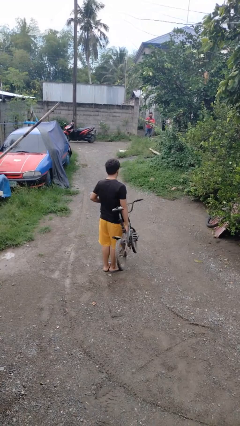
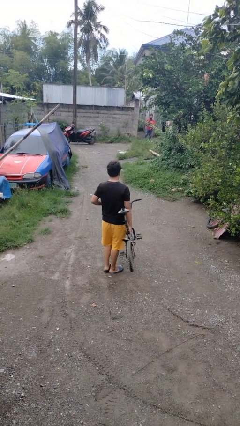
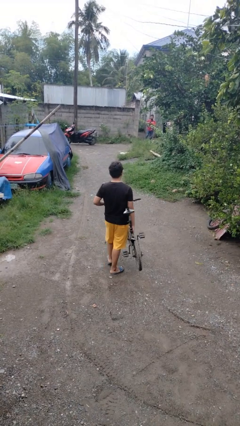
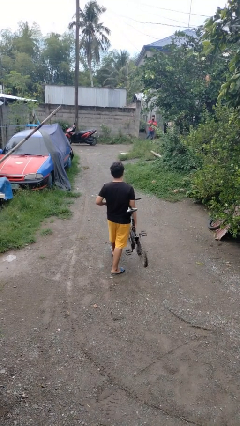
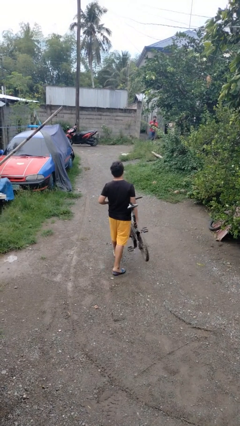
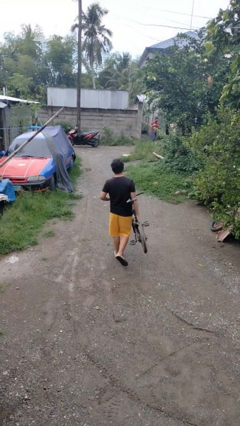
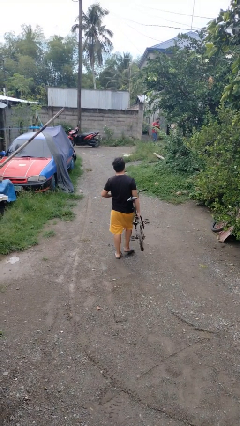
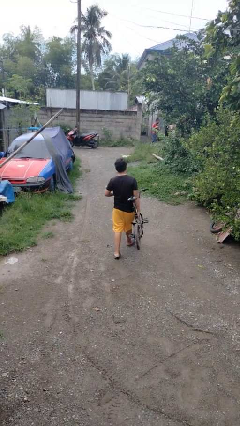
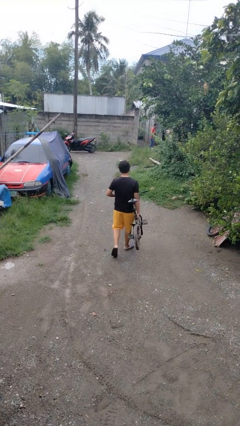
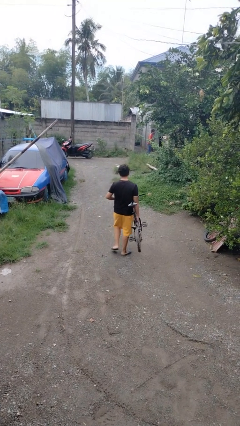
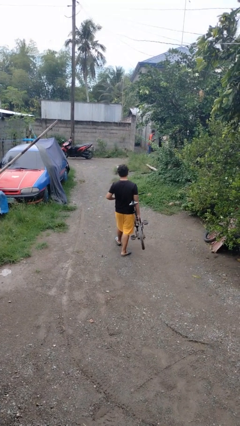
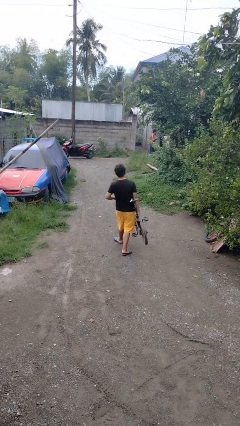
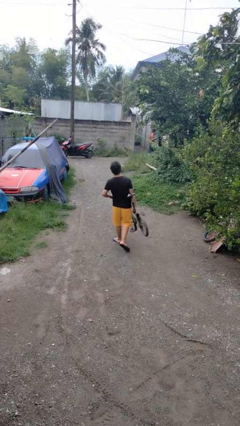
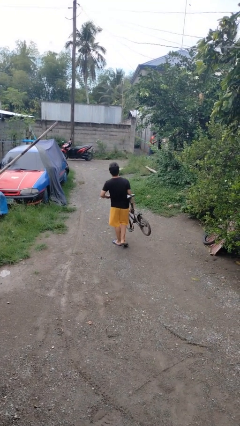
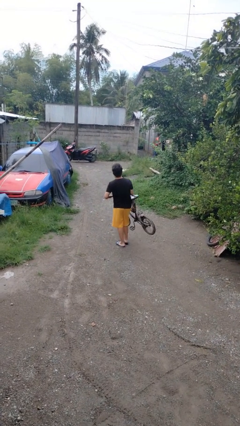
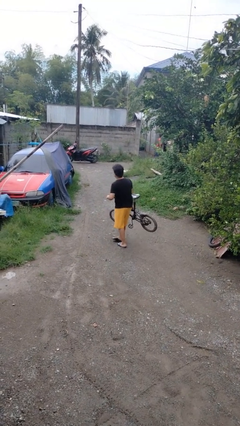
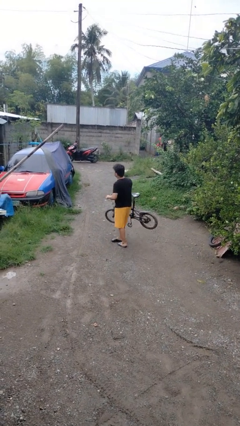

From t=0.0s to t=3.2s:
person carries bicycle

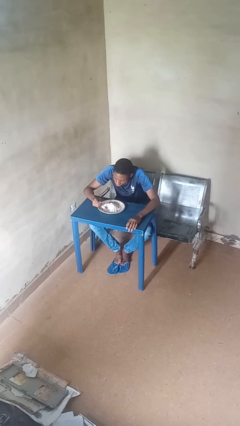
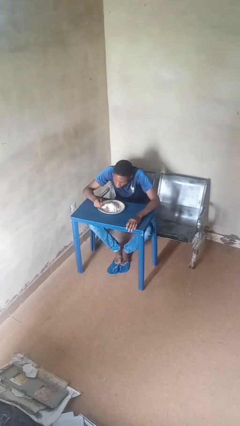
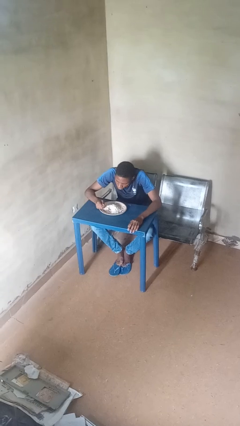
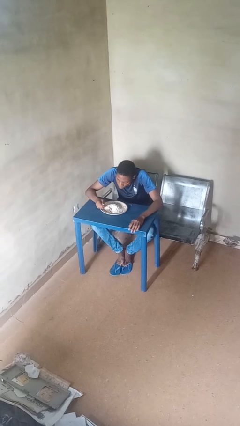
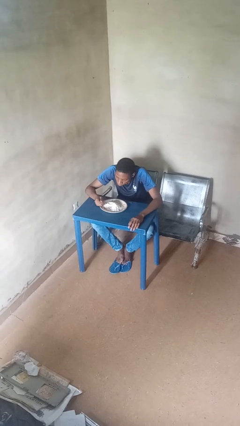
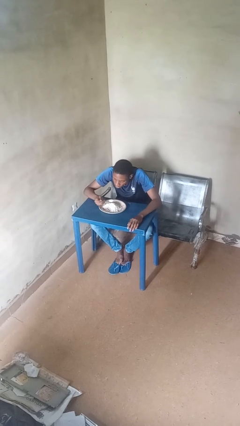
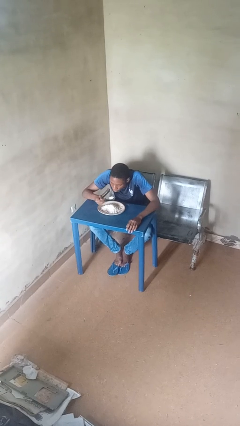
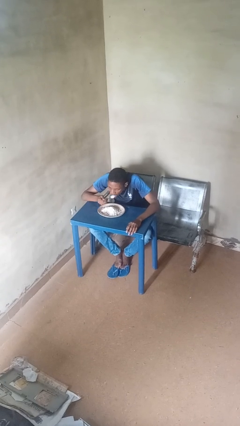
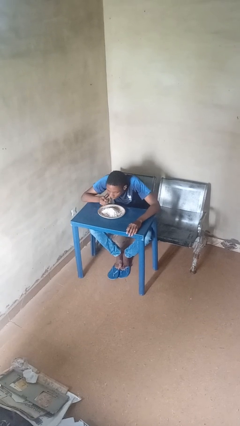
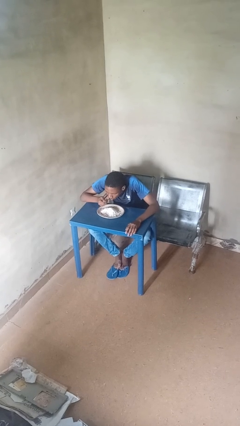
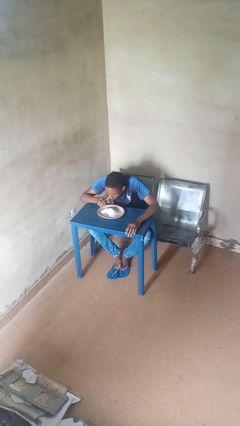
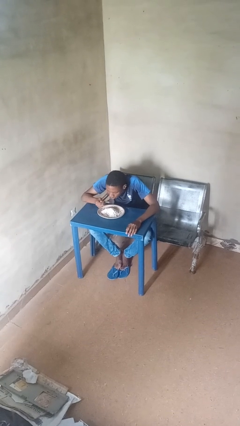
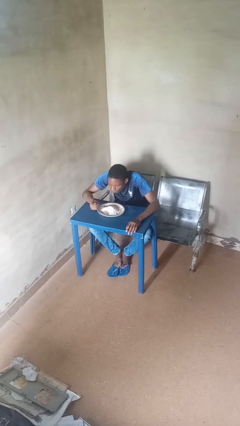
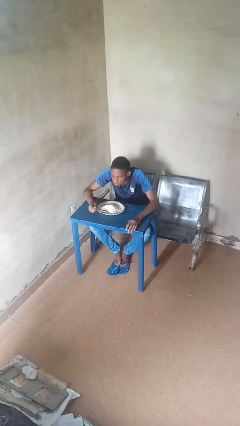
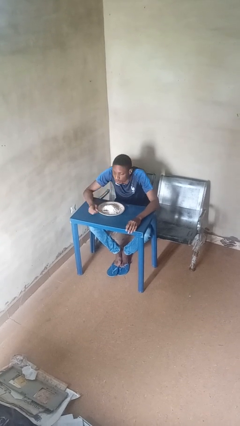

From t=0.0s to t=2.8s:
person eats with utensil

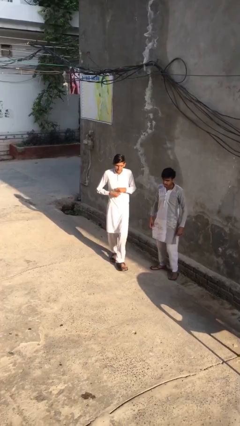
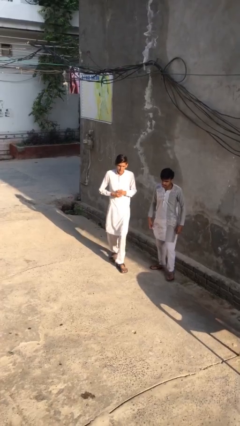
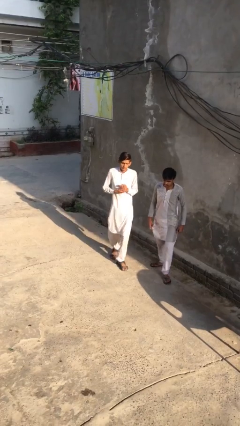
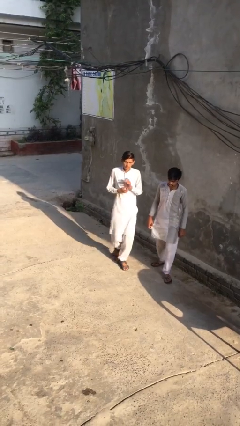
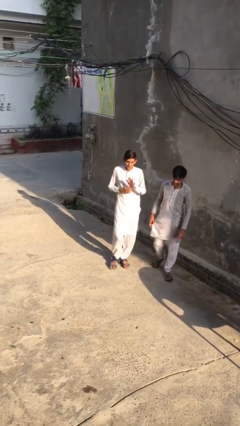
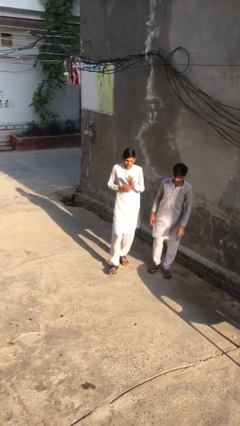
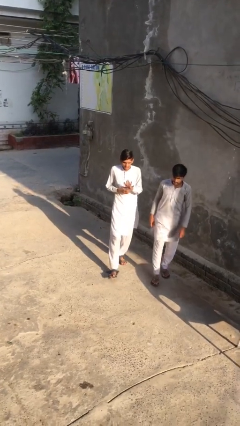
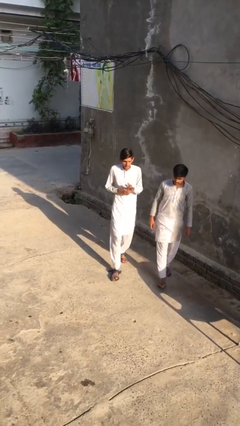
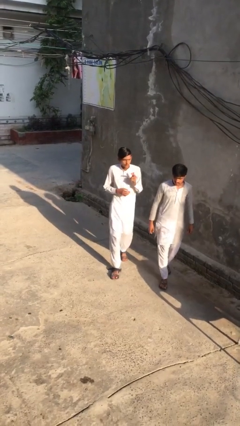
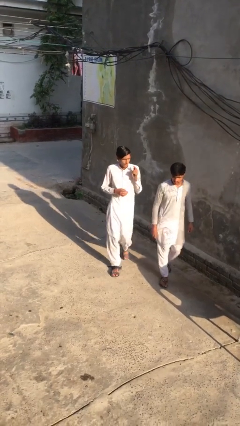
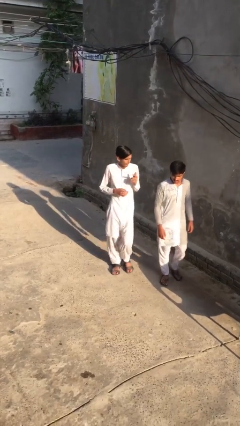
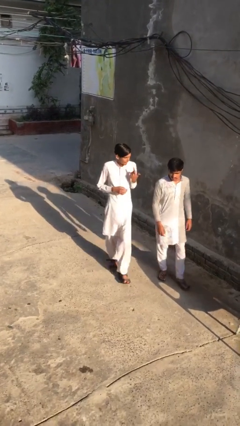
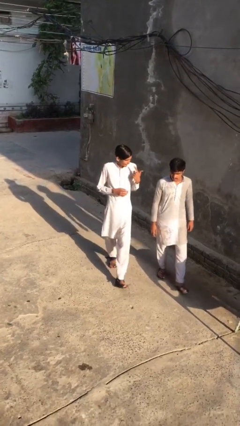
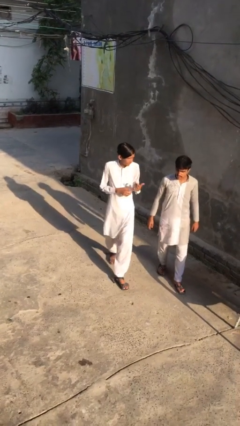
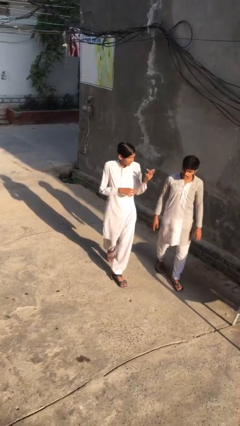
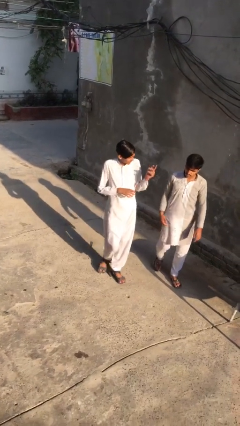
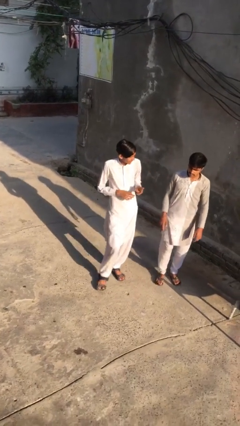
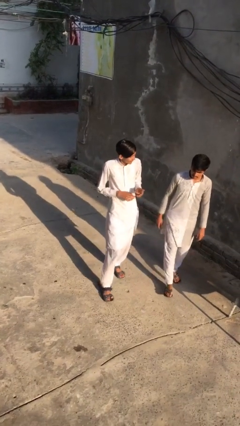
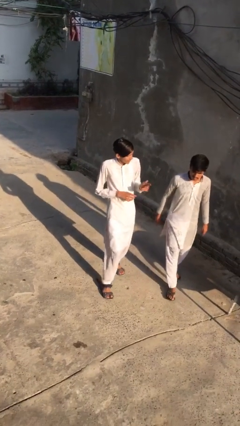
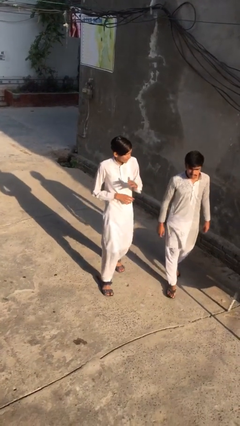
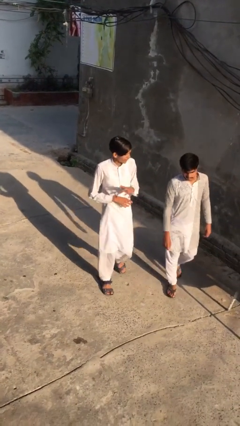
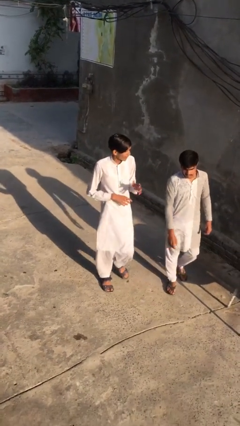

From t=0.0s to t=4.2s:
person talks to person

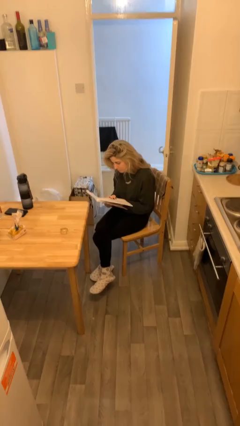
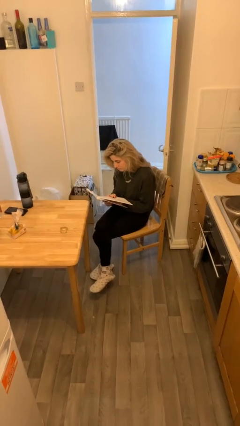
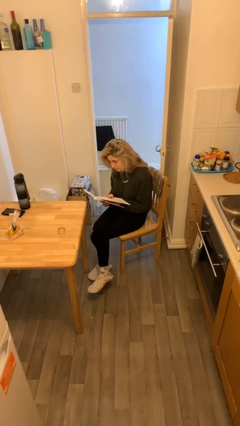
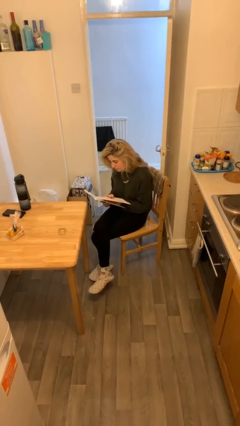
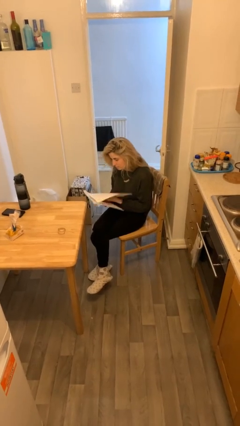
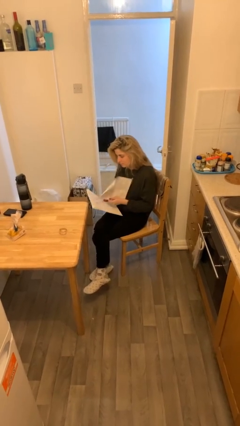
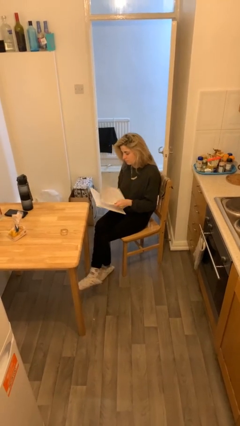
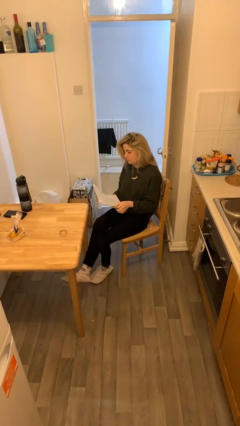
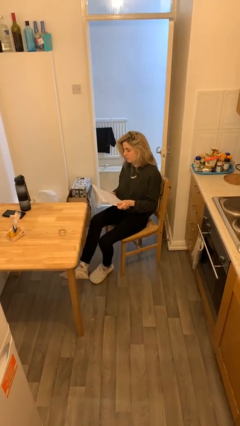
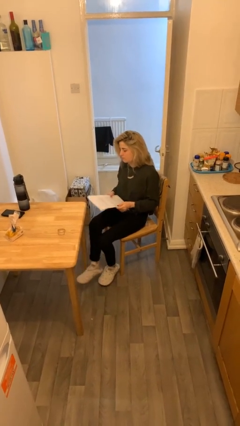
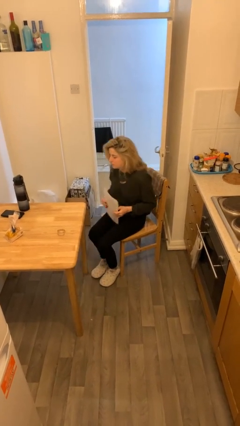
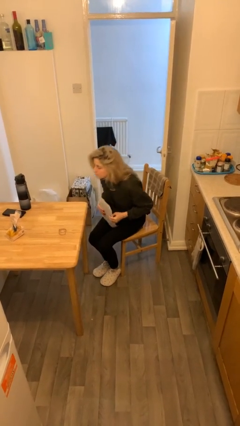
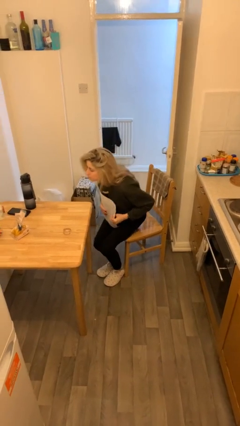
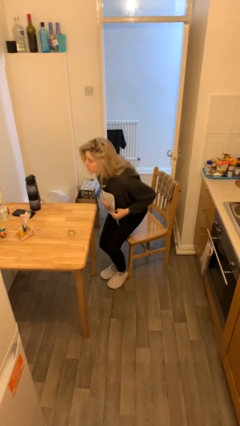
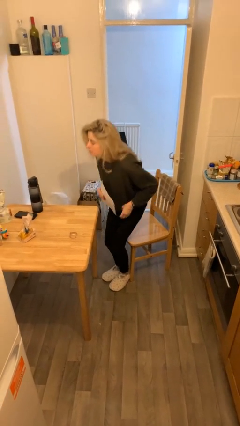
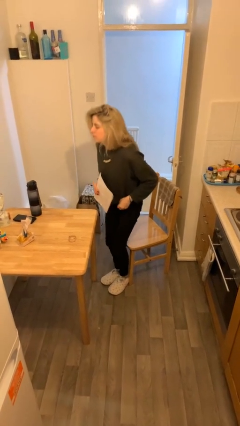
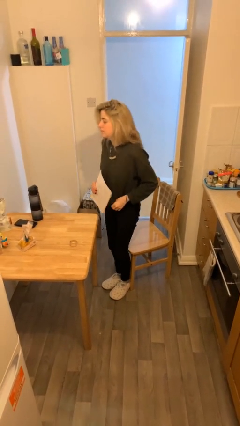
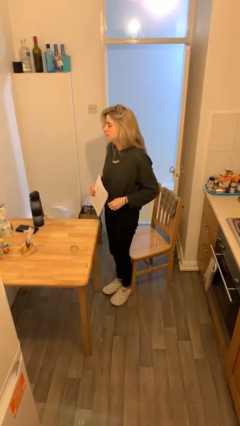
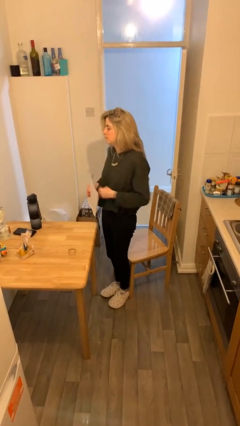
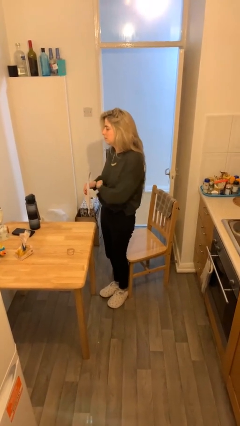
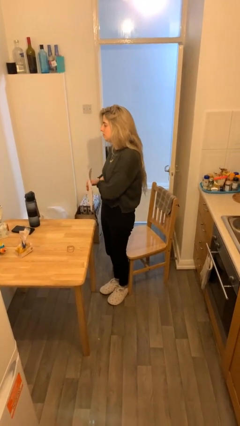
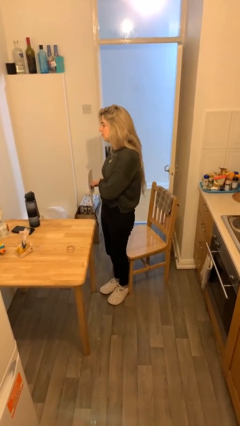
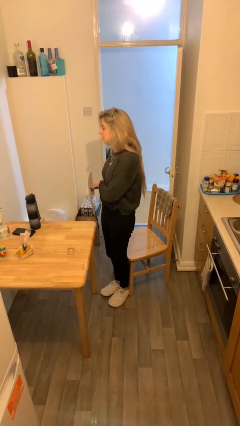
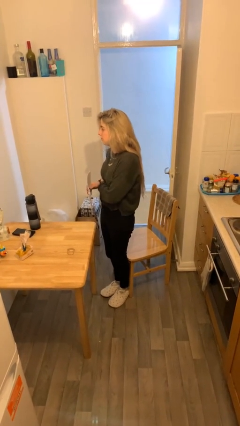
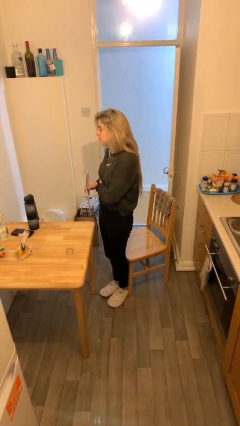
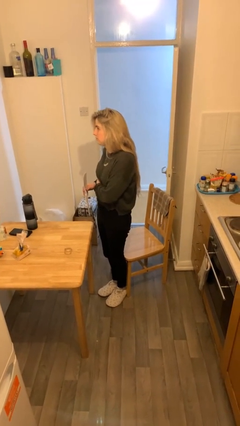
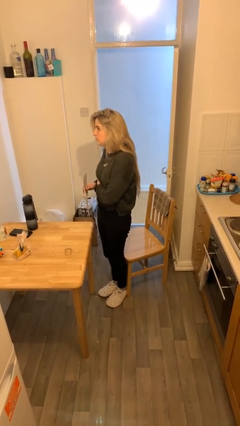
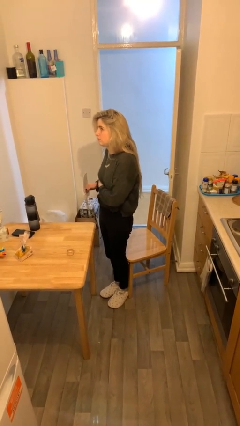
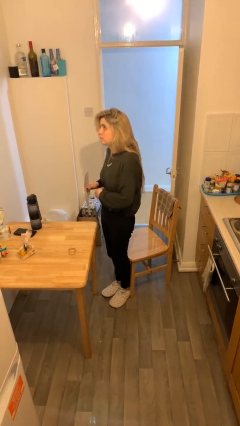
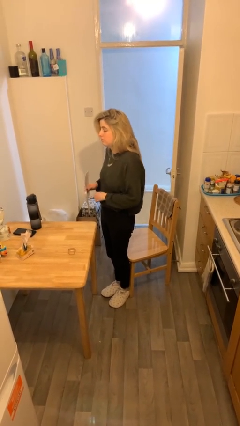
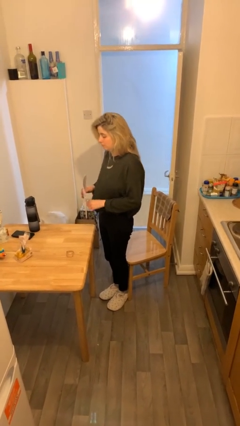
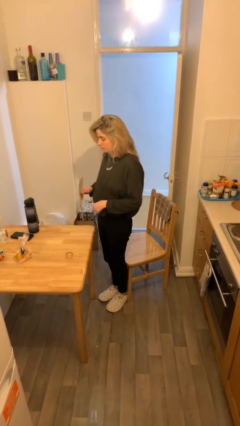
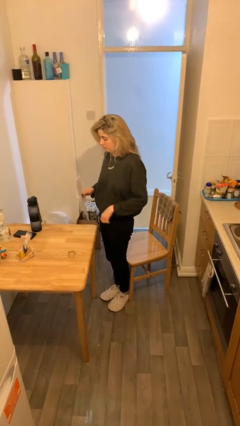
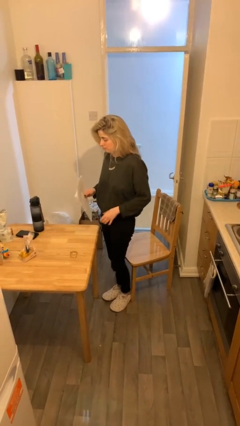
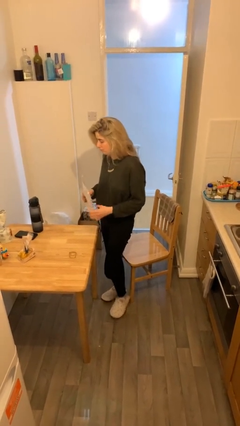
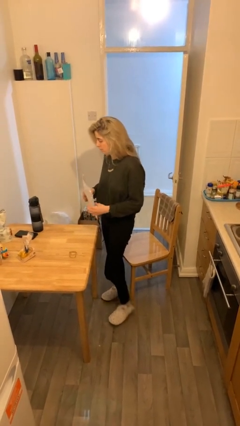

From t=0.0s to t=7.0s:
person stands up

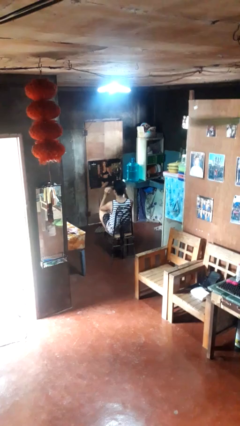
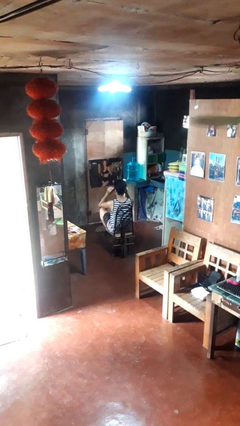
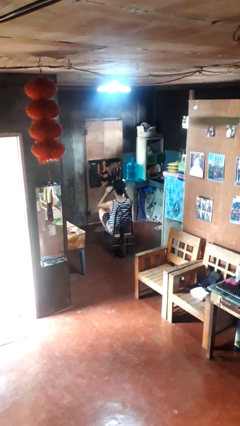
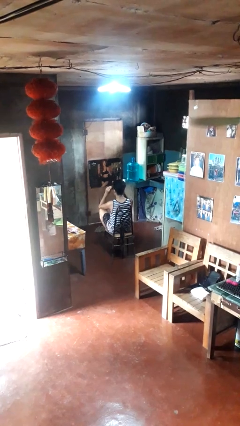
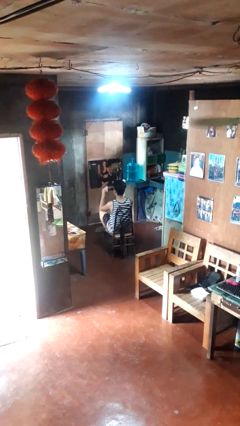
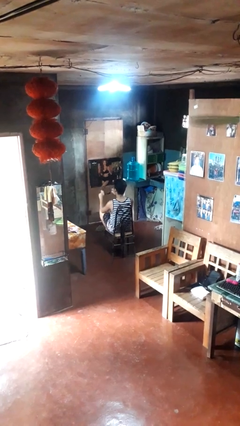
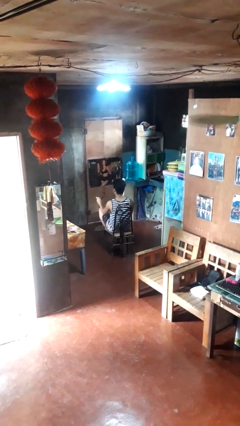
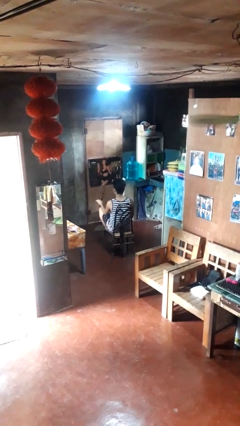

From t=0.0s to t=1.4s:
person takes off sunglasses
